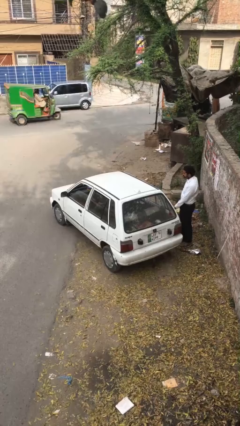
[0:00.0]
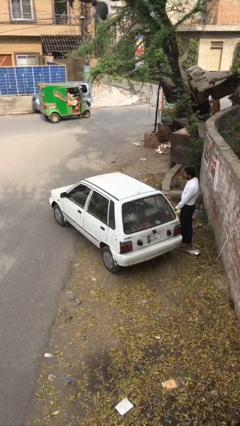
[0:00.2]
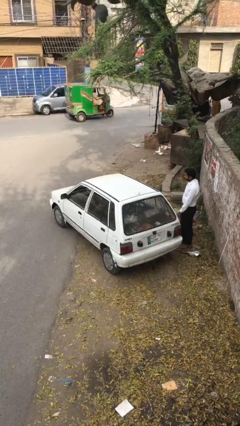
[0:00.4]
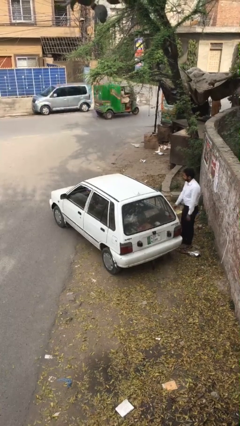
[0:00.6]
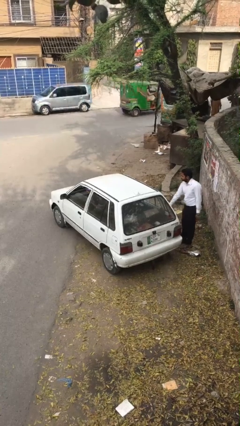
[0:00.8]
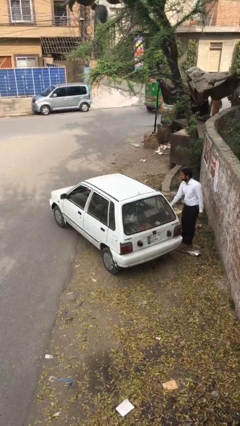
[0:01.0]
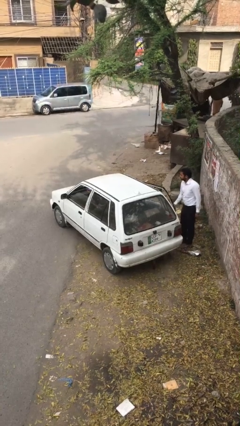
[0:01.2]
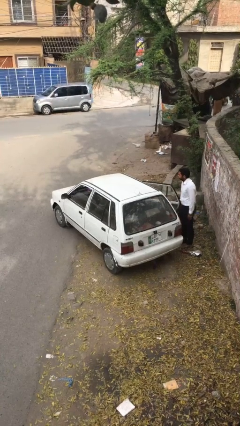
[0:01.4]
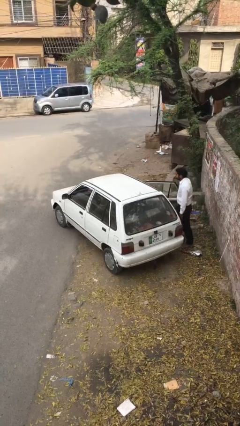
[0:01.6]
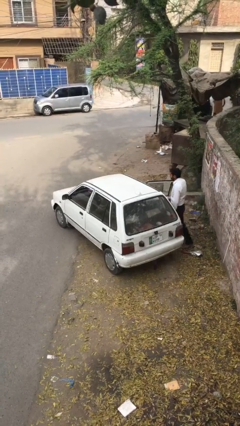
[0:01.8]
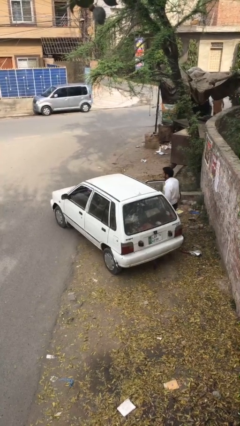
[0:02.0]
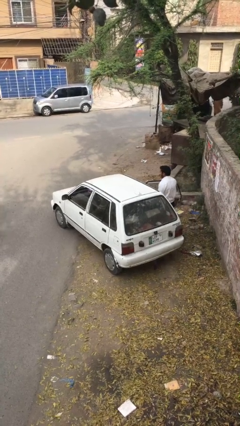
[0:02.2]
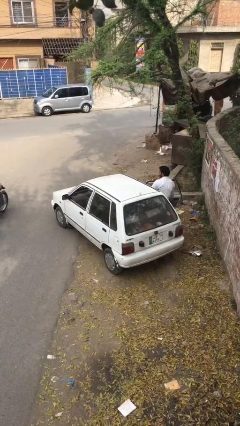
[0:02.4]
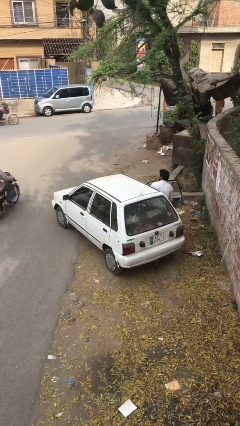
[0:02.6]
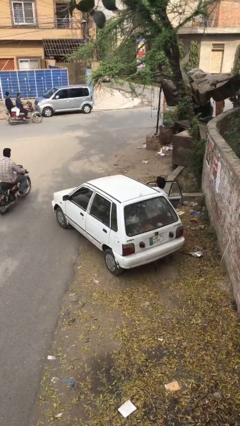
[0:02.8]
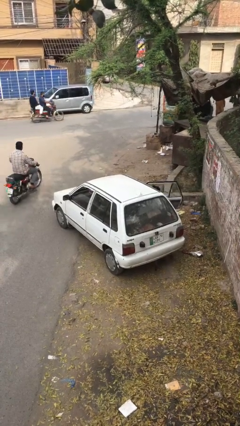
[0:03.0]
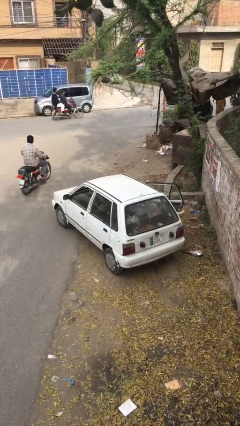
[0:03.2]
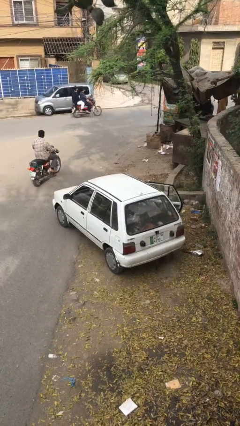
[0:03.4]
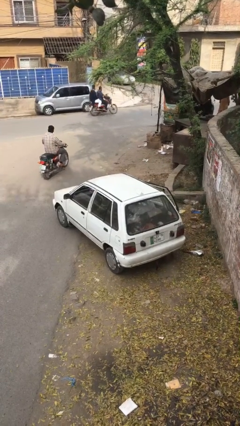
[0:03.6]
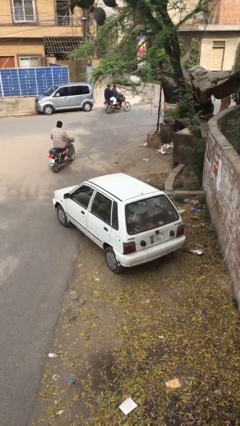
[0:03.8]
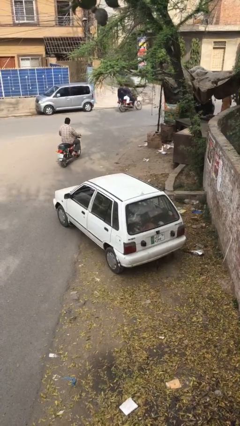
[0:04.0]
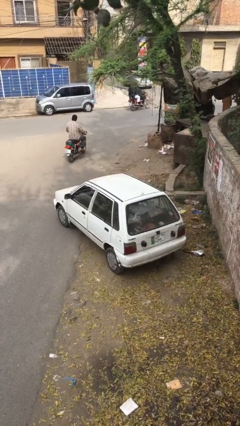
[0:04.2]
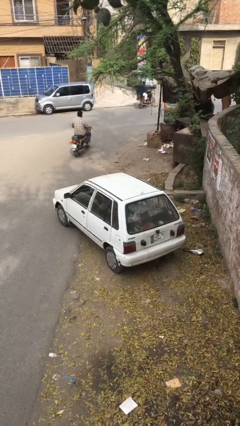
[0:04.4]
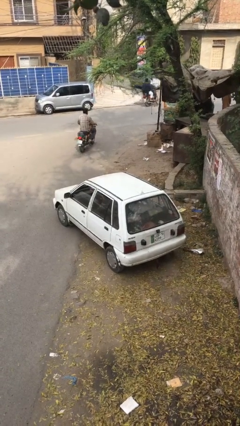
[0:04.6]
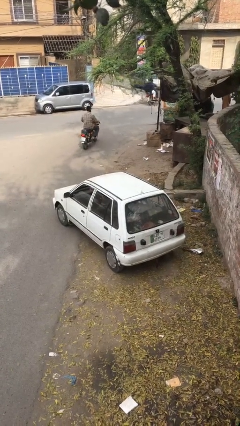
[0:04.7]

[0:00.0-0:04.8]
car picks up person

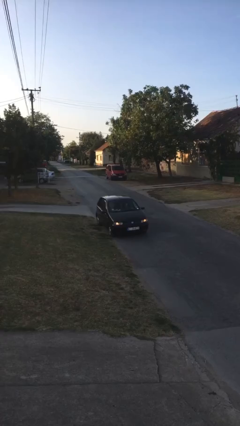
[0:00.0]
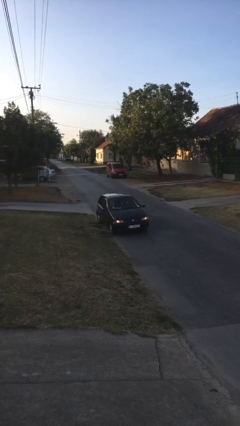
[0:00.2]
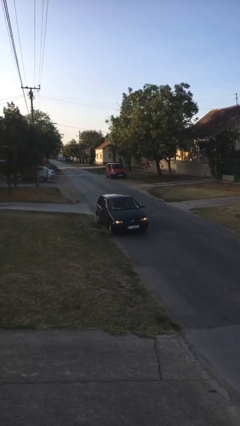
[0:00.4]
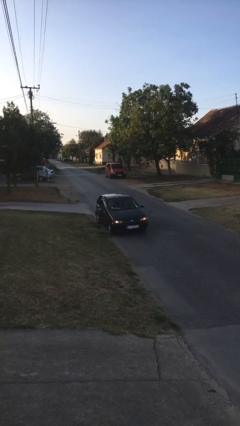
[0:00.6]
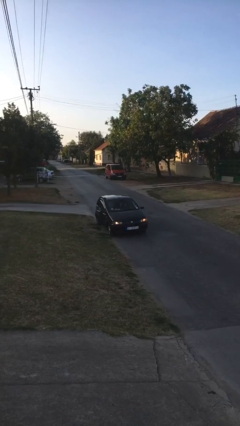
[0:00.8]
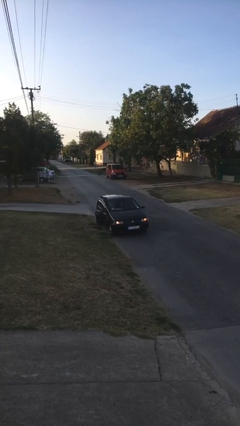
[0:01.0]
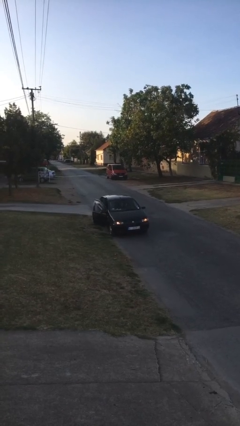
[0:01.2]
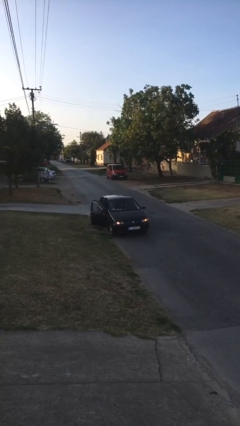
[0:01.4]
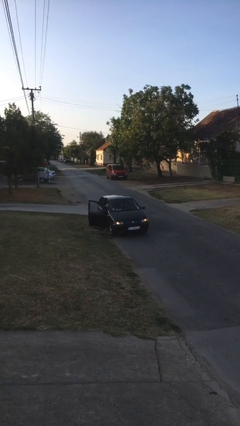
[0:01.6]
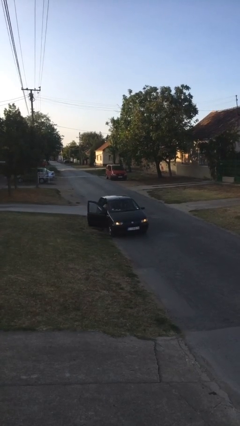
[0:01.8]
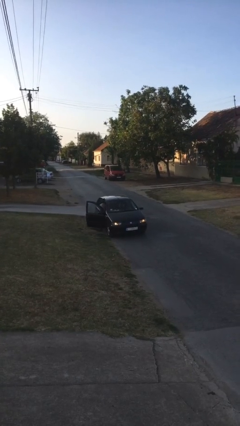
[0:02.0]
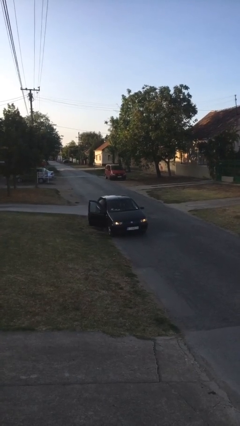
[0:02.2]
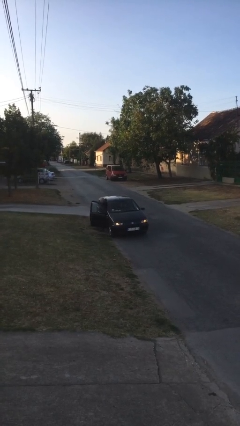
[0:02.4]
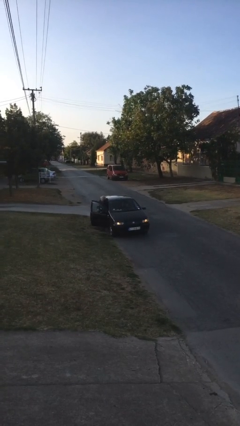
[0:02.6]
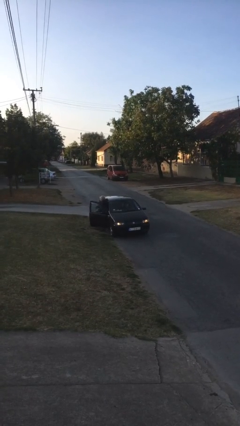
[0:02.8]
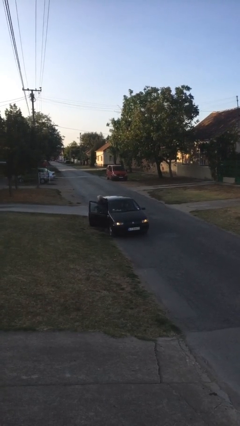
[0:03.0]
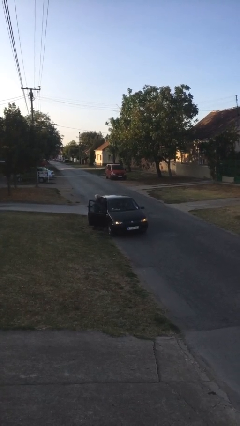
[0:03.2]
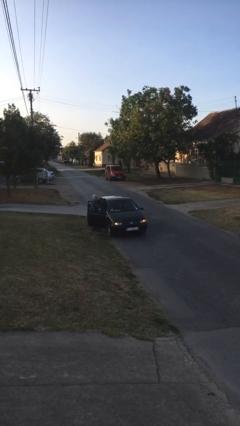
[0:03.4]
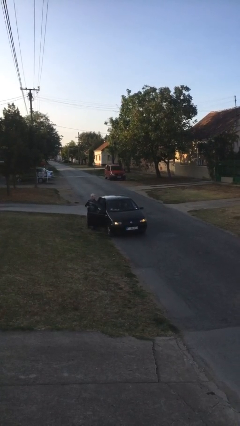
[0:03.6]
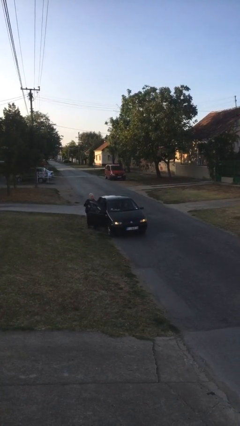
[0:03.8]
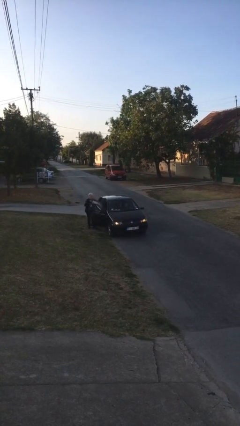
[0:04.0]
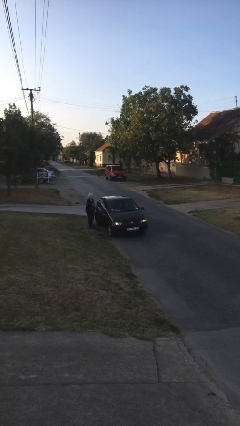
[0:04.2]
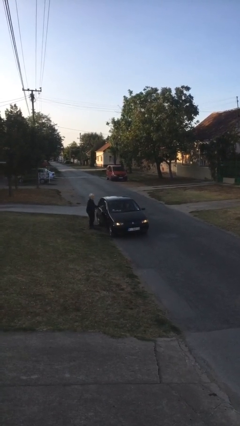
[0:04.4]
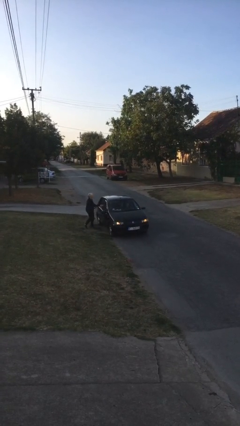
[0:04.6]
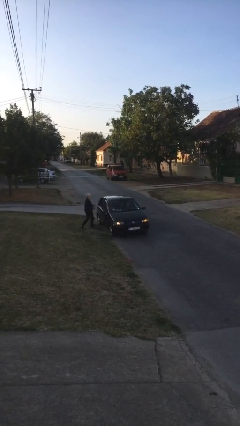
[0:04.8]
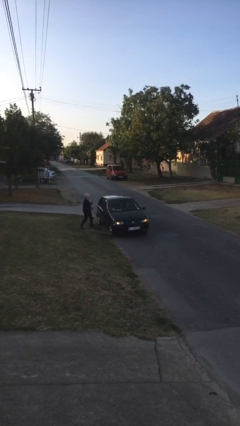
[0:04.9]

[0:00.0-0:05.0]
car drops off person

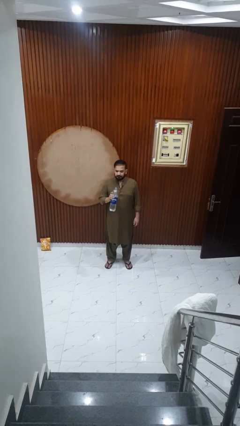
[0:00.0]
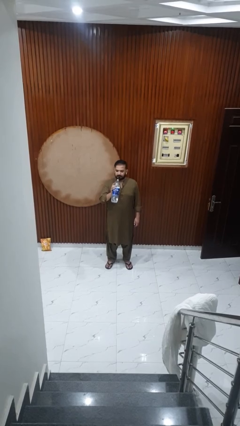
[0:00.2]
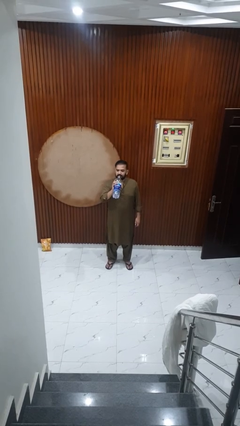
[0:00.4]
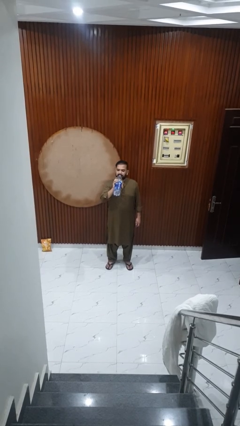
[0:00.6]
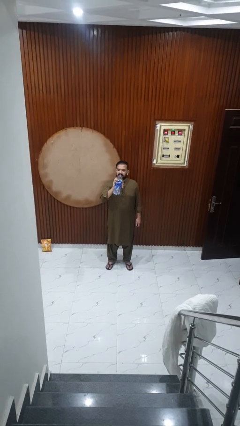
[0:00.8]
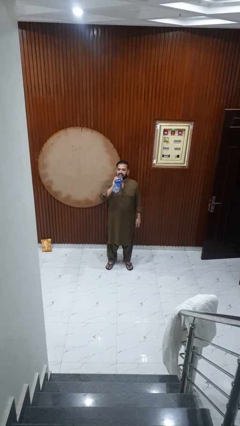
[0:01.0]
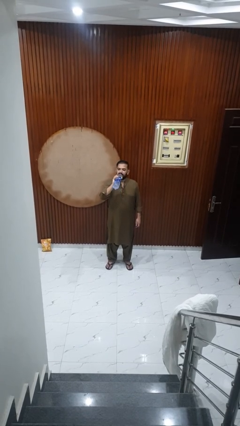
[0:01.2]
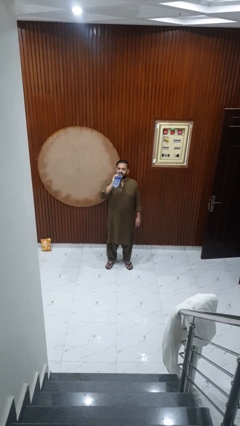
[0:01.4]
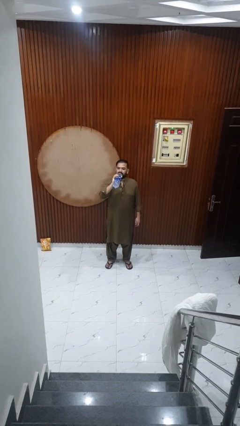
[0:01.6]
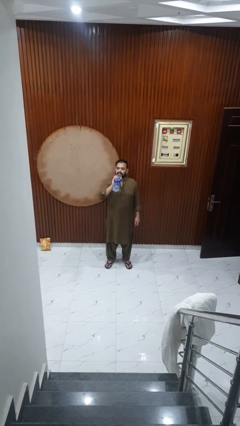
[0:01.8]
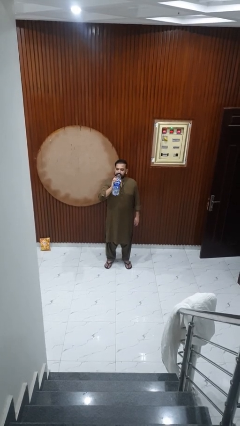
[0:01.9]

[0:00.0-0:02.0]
person drinks from bottle

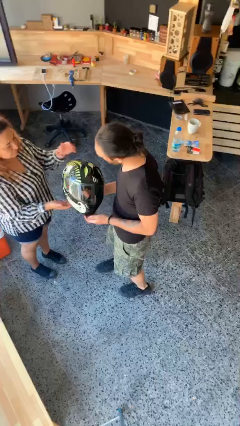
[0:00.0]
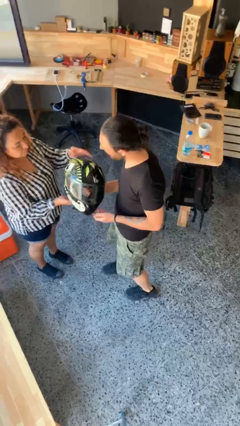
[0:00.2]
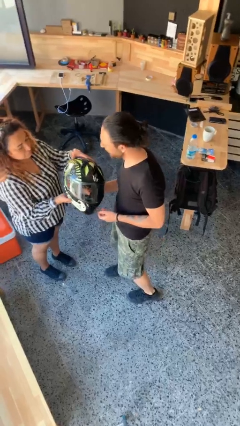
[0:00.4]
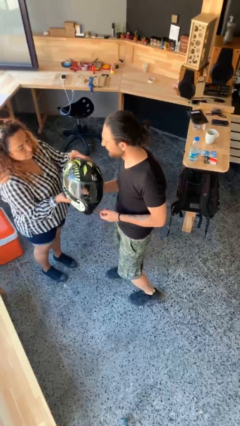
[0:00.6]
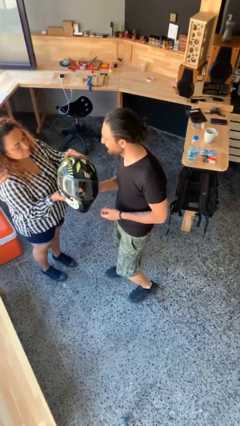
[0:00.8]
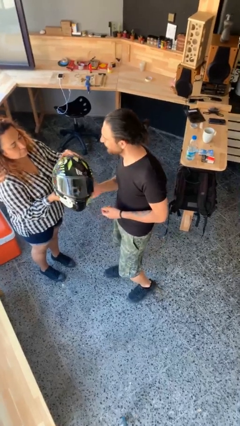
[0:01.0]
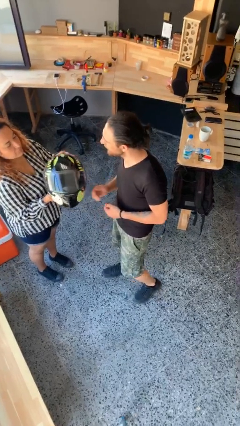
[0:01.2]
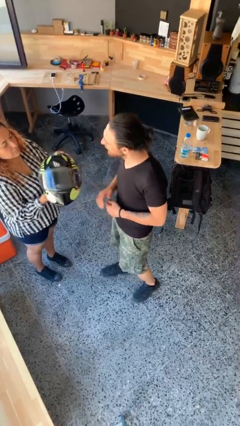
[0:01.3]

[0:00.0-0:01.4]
person transfers object to person

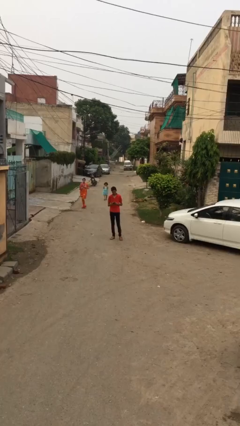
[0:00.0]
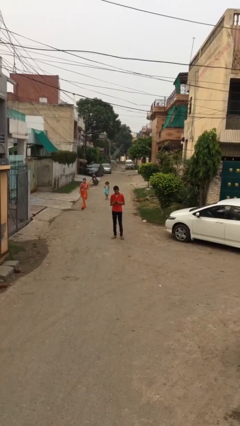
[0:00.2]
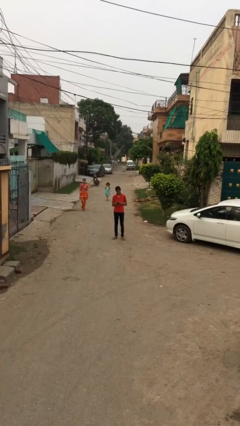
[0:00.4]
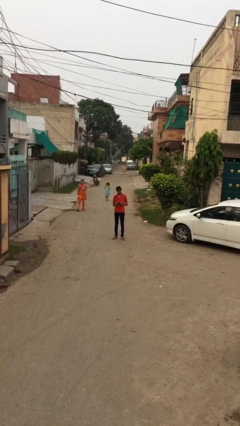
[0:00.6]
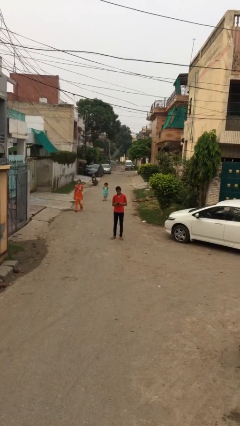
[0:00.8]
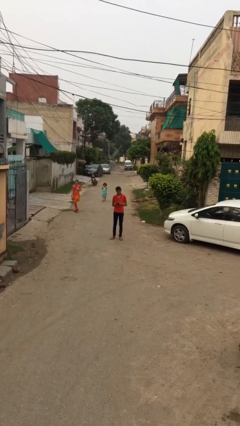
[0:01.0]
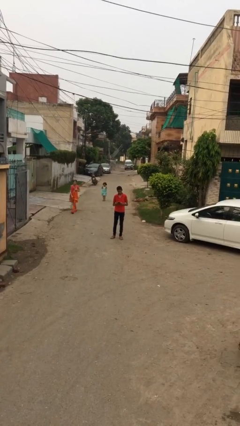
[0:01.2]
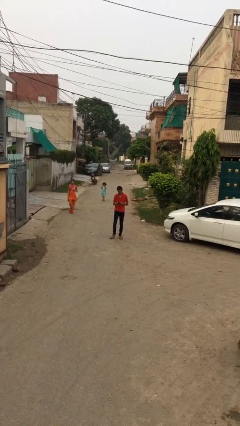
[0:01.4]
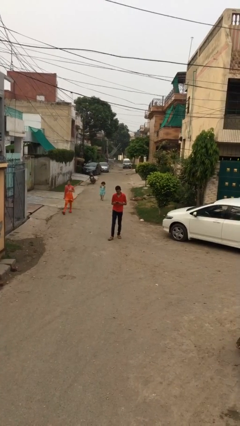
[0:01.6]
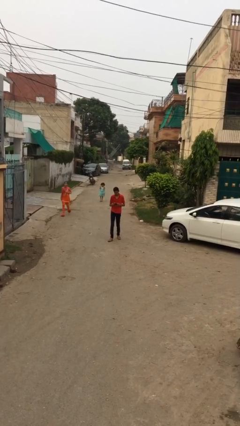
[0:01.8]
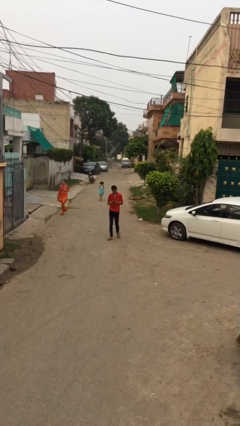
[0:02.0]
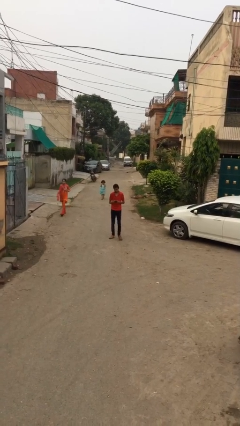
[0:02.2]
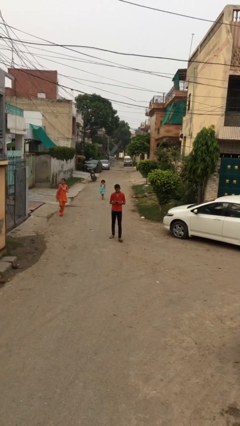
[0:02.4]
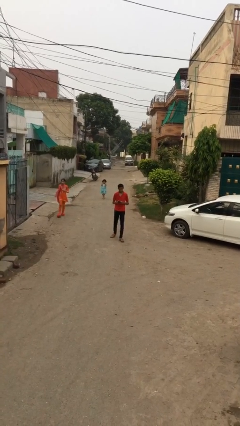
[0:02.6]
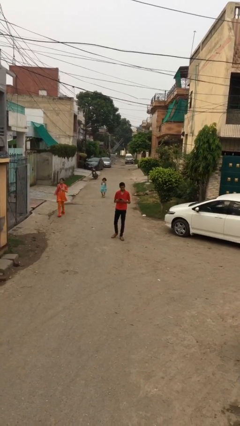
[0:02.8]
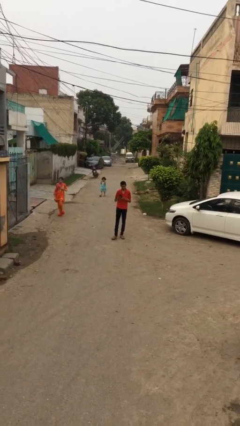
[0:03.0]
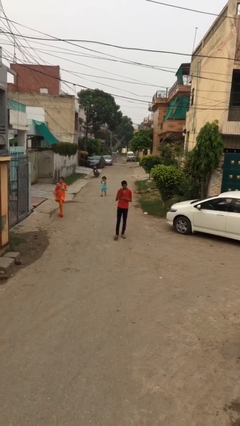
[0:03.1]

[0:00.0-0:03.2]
person texts on phone

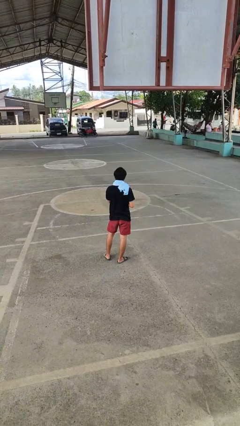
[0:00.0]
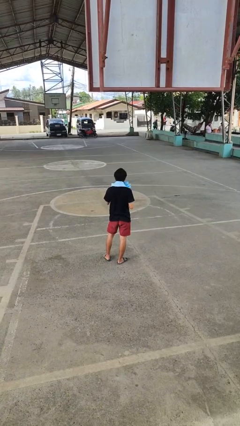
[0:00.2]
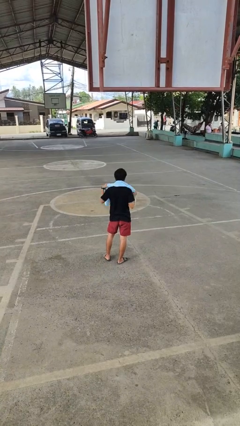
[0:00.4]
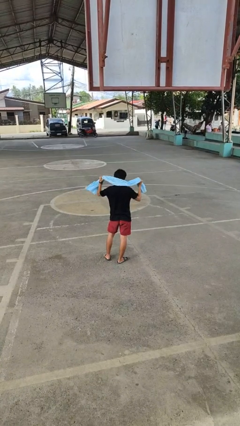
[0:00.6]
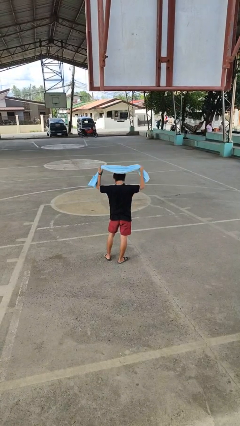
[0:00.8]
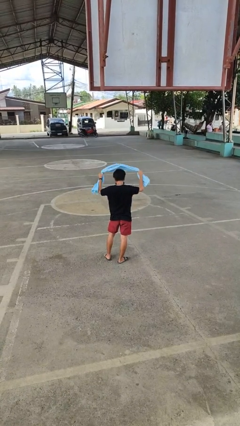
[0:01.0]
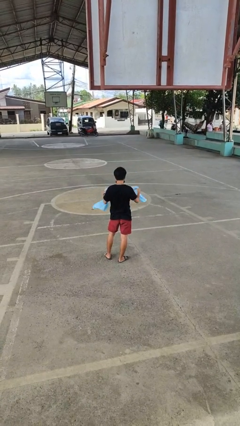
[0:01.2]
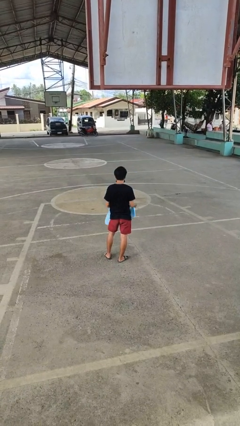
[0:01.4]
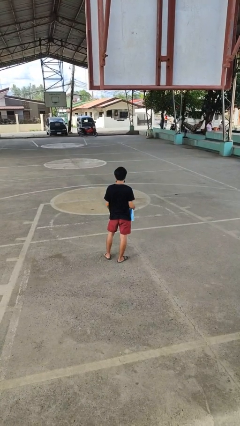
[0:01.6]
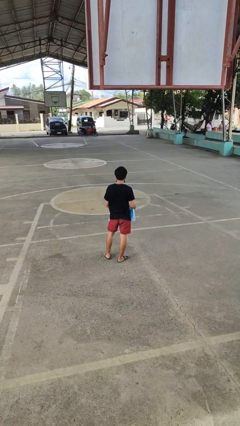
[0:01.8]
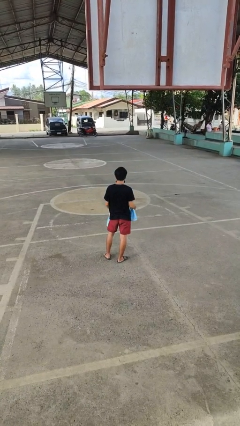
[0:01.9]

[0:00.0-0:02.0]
person takes off scarf
